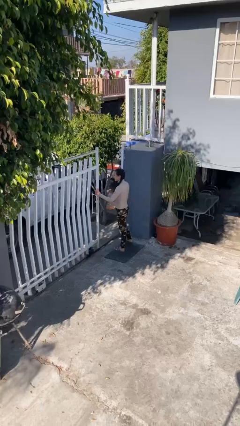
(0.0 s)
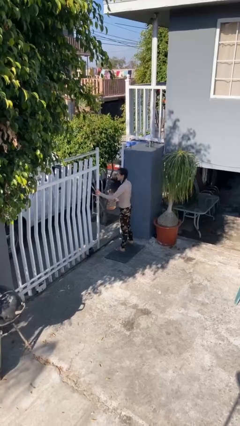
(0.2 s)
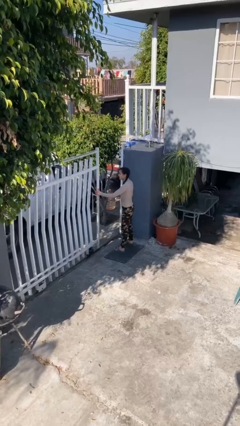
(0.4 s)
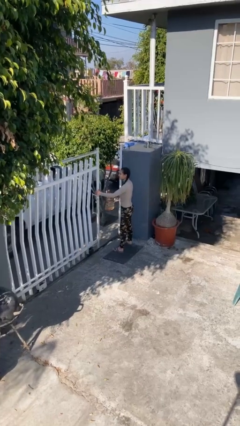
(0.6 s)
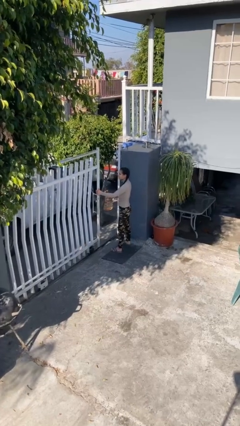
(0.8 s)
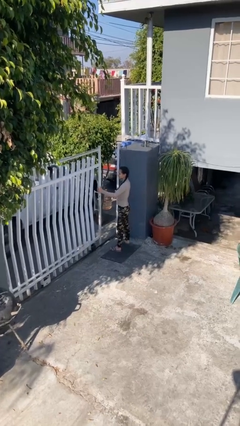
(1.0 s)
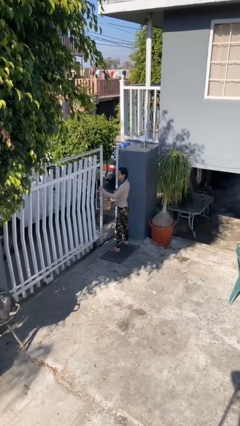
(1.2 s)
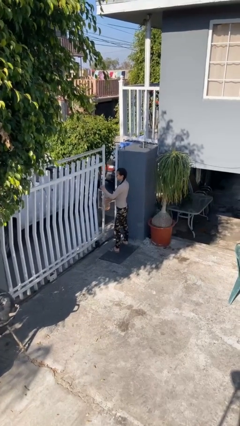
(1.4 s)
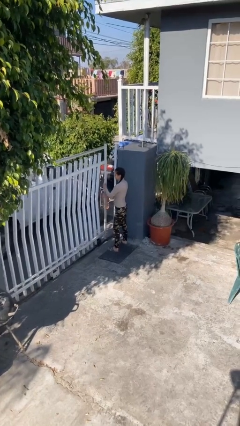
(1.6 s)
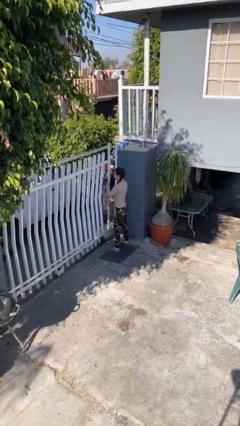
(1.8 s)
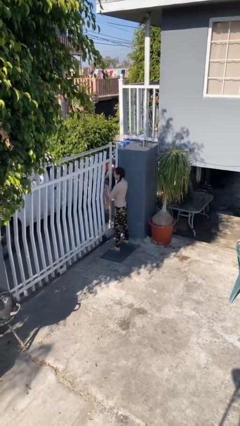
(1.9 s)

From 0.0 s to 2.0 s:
person closes facility door

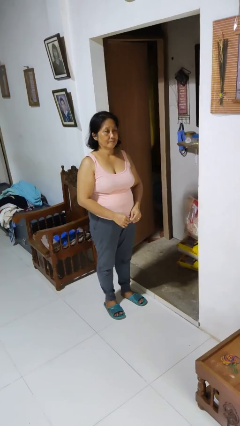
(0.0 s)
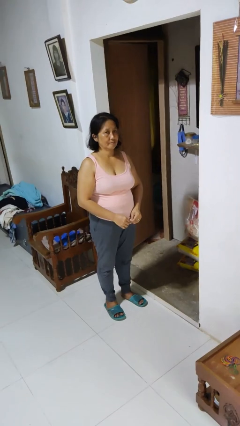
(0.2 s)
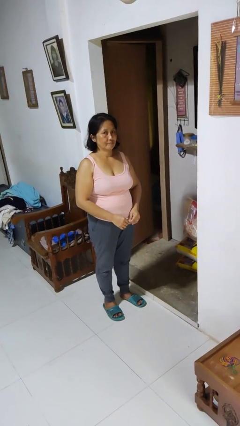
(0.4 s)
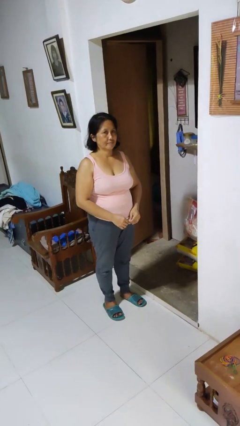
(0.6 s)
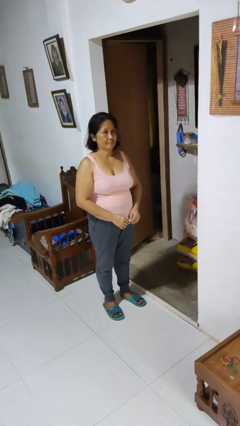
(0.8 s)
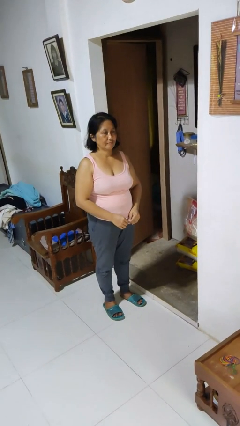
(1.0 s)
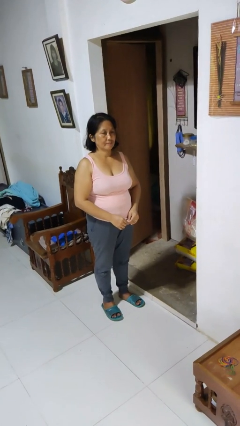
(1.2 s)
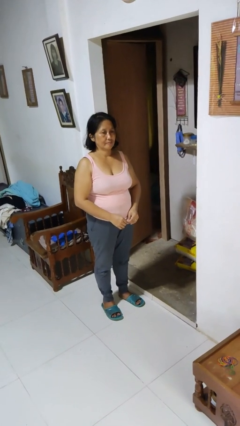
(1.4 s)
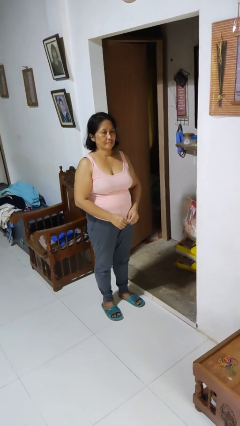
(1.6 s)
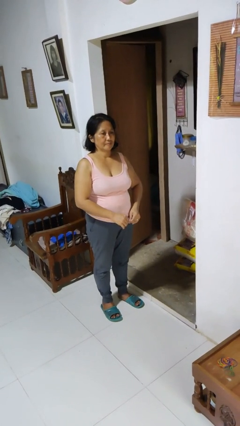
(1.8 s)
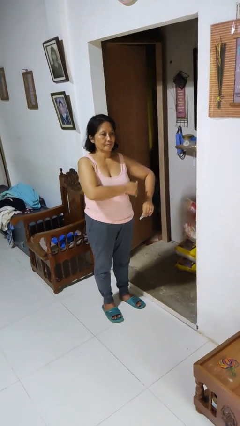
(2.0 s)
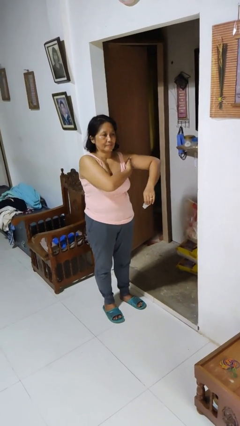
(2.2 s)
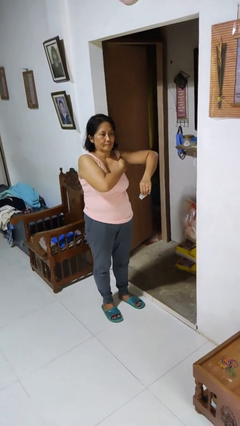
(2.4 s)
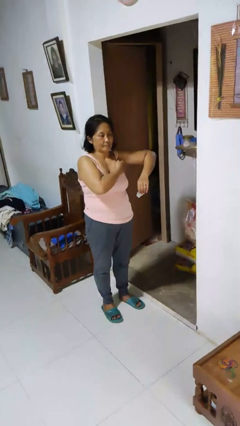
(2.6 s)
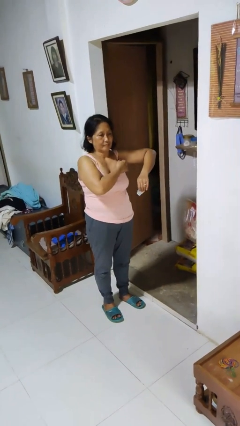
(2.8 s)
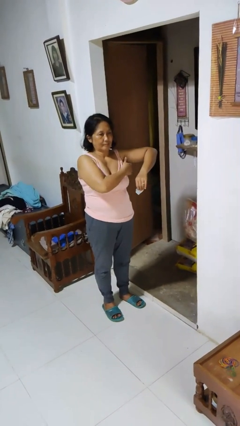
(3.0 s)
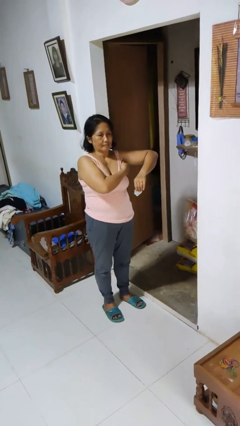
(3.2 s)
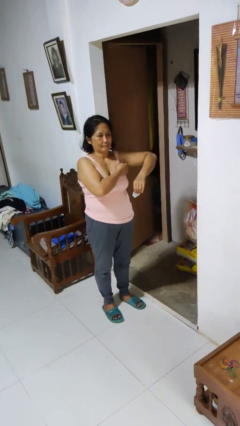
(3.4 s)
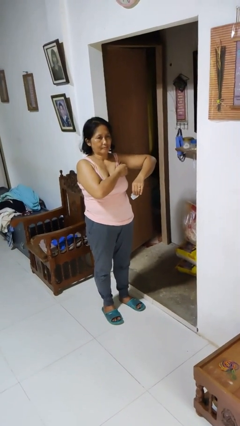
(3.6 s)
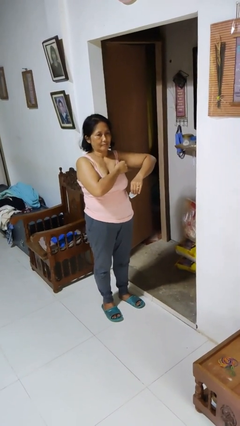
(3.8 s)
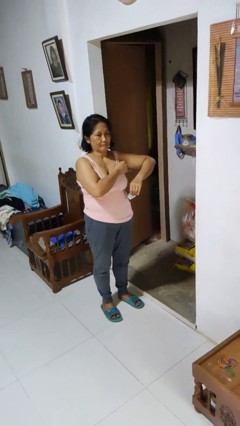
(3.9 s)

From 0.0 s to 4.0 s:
person applies deodorant

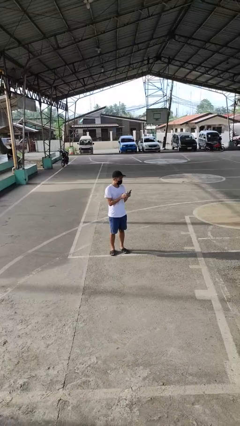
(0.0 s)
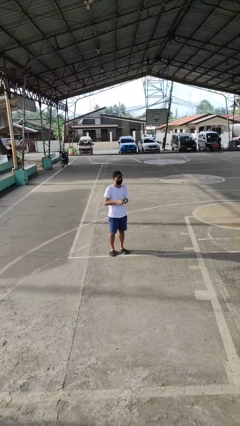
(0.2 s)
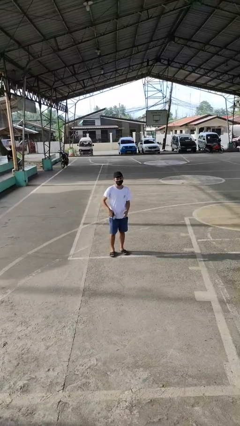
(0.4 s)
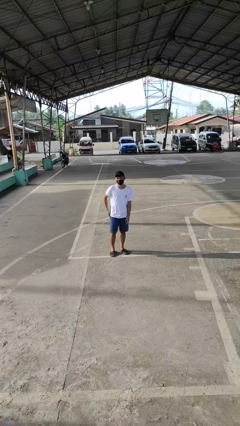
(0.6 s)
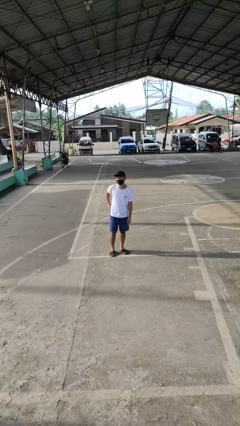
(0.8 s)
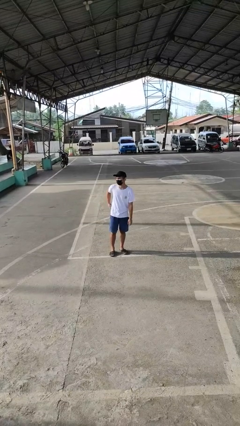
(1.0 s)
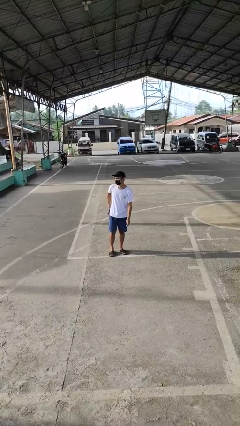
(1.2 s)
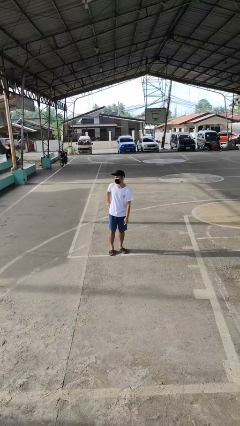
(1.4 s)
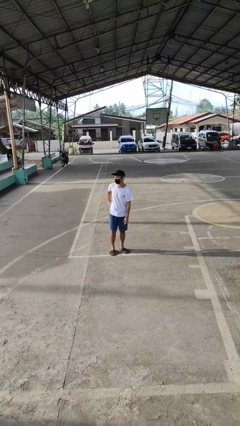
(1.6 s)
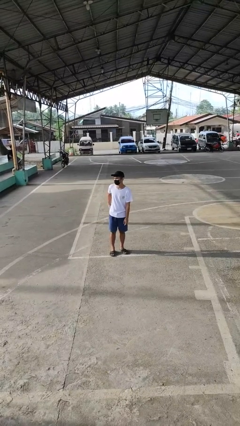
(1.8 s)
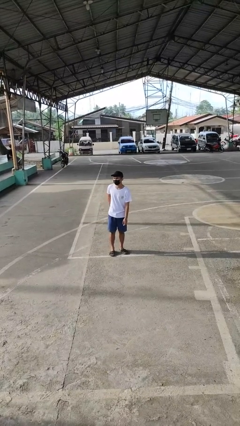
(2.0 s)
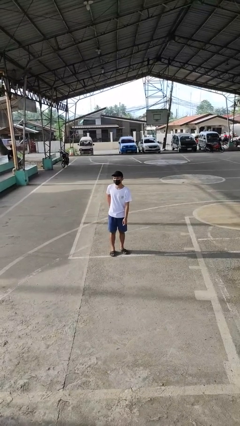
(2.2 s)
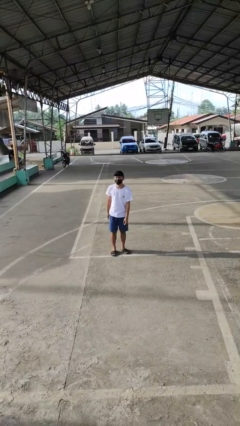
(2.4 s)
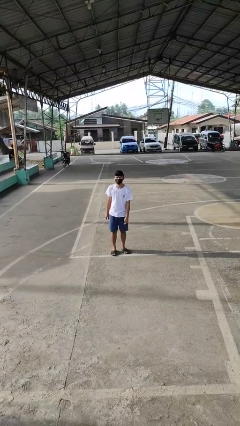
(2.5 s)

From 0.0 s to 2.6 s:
person puts phone into pocket

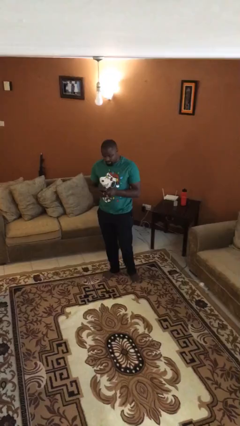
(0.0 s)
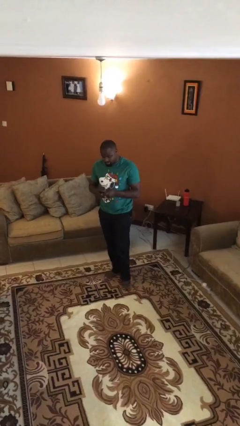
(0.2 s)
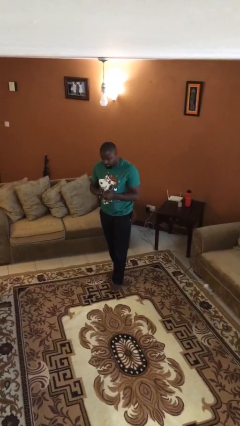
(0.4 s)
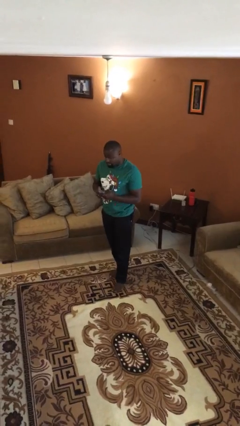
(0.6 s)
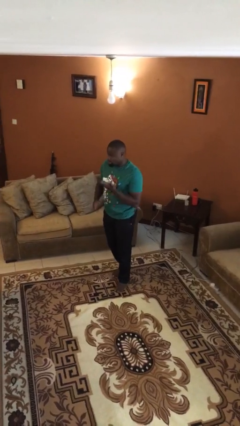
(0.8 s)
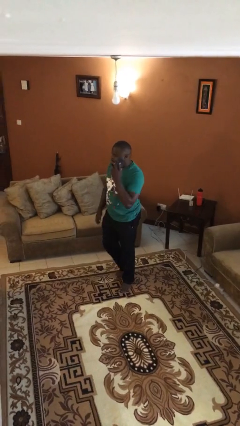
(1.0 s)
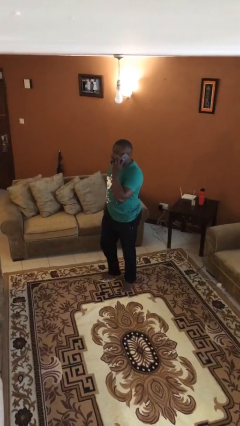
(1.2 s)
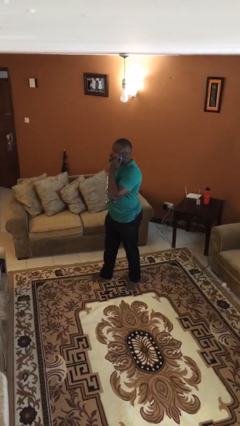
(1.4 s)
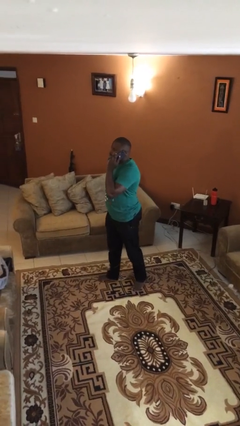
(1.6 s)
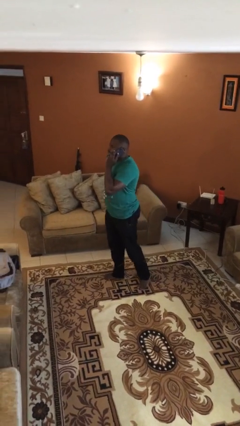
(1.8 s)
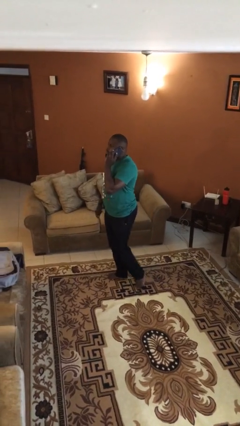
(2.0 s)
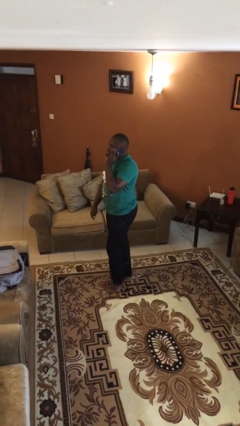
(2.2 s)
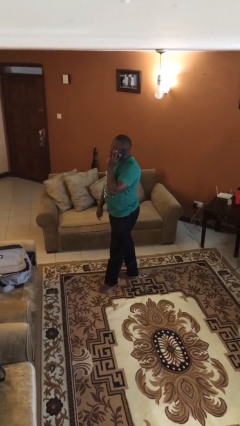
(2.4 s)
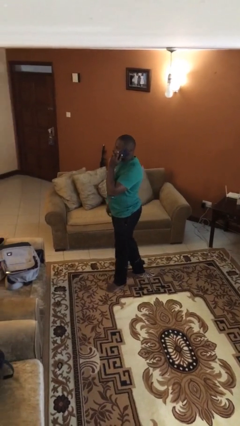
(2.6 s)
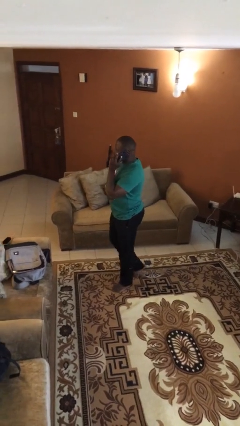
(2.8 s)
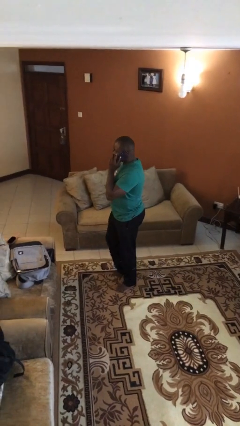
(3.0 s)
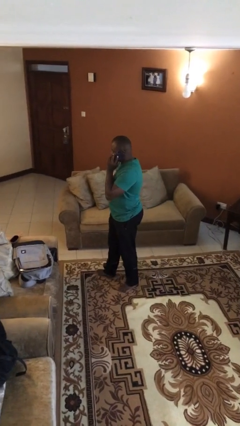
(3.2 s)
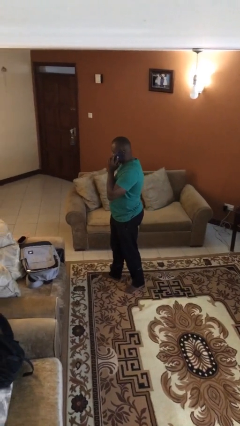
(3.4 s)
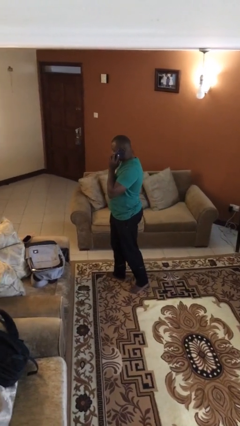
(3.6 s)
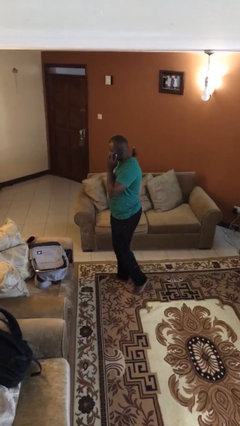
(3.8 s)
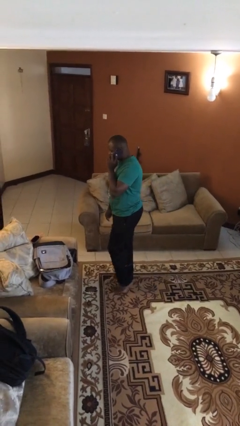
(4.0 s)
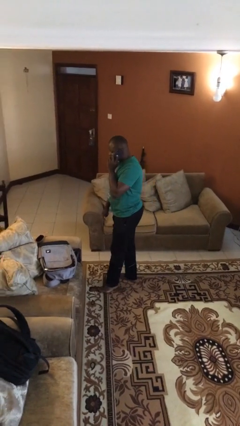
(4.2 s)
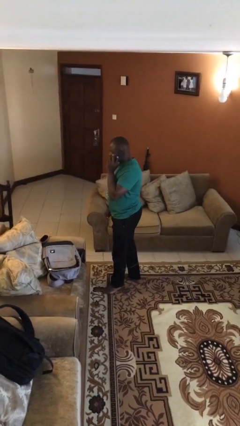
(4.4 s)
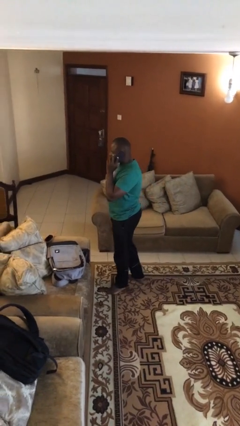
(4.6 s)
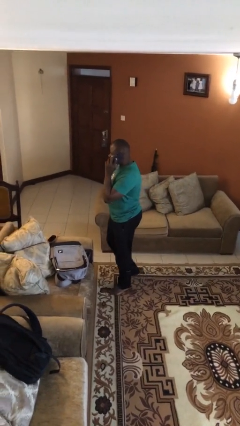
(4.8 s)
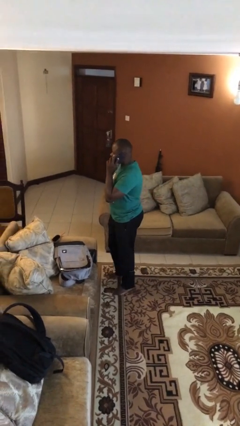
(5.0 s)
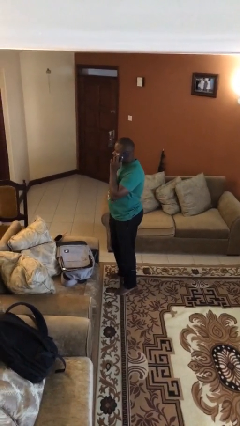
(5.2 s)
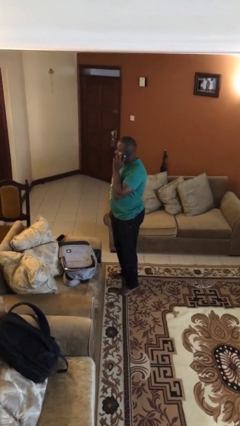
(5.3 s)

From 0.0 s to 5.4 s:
person talks on phone

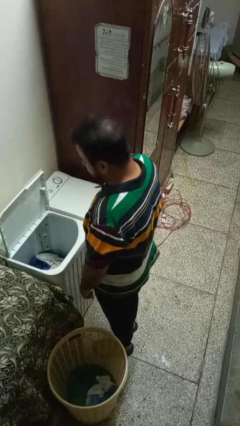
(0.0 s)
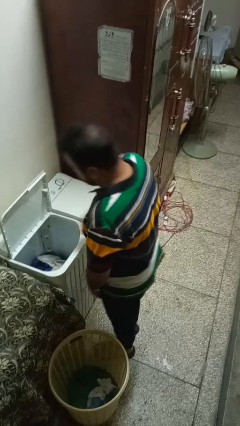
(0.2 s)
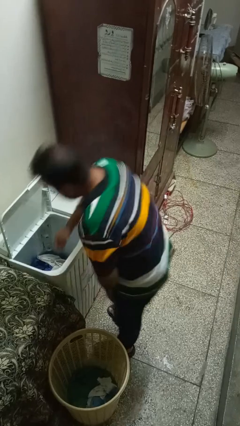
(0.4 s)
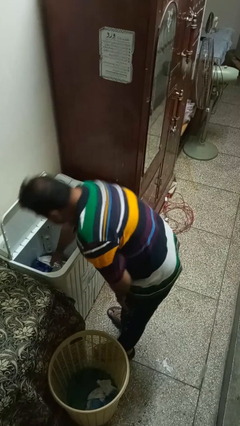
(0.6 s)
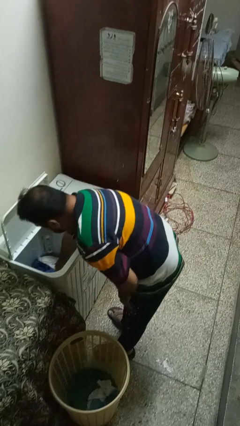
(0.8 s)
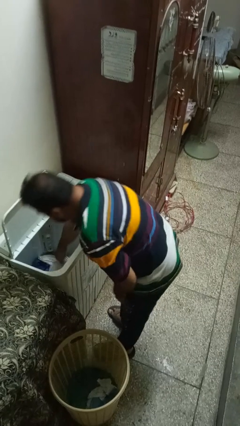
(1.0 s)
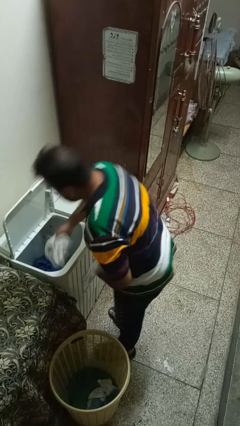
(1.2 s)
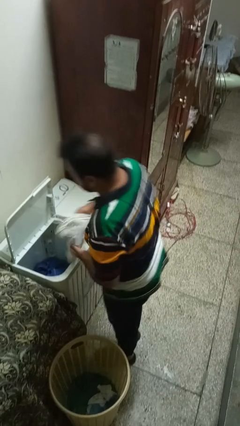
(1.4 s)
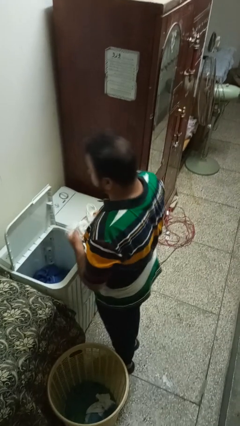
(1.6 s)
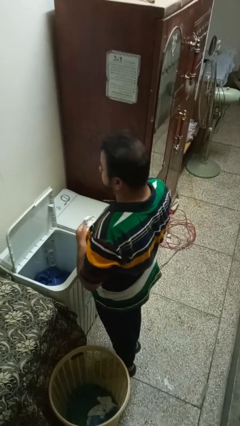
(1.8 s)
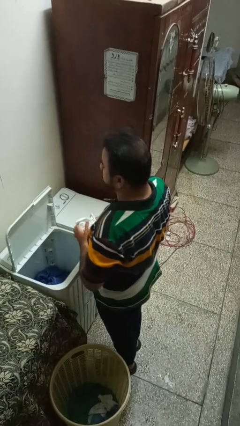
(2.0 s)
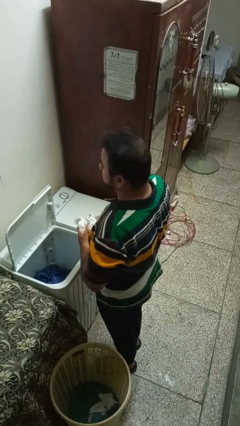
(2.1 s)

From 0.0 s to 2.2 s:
person unloads clotheswasher

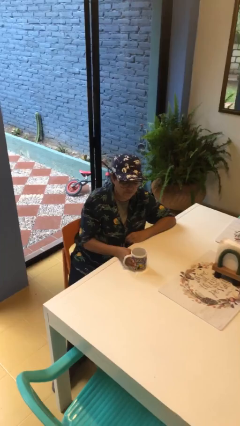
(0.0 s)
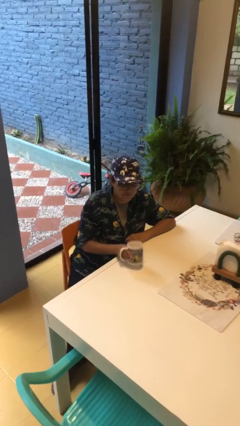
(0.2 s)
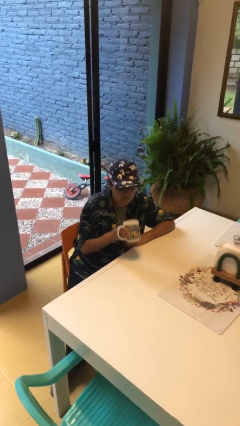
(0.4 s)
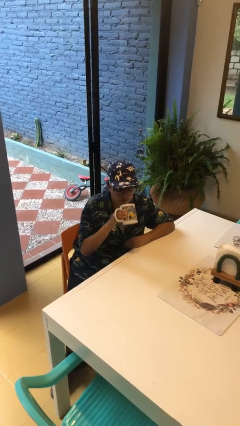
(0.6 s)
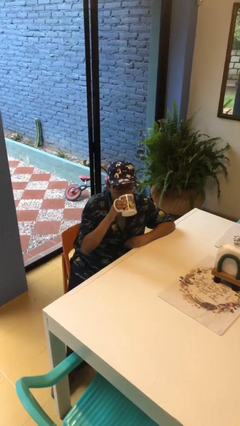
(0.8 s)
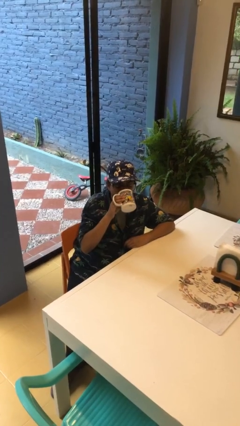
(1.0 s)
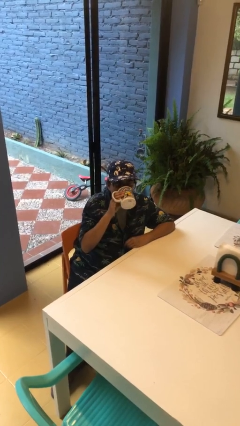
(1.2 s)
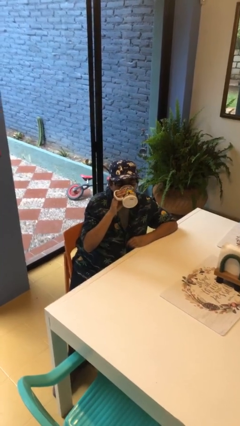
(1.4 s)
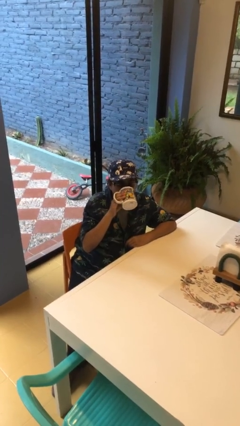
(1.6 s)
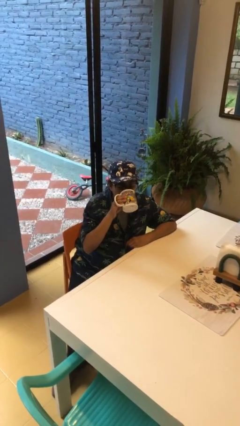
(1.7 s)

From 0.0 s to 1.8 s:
person drinks from mug
